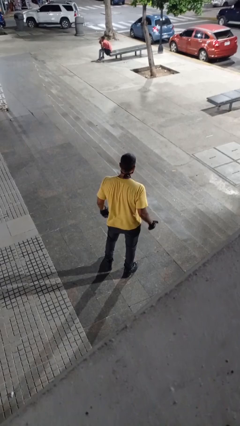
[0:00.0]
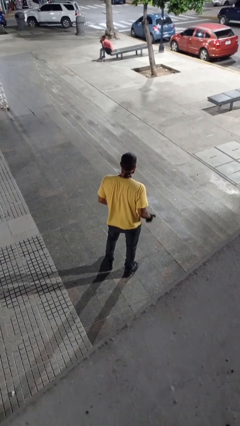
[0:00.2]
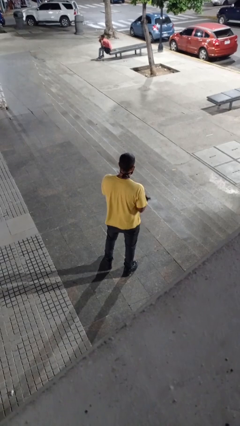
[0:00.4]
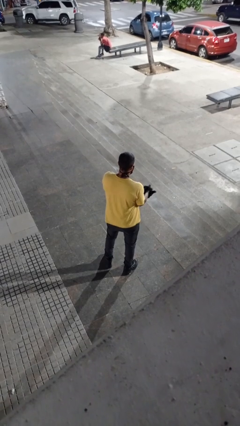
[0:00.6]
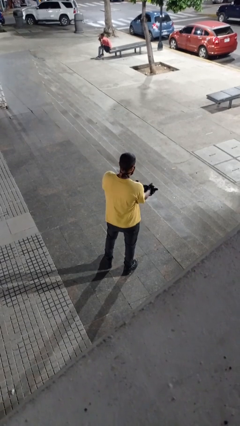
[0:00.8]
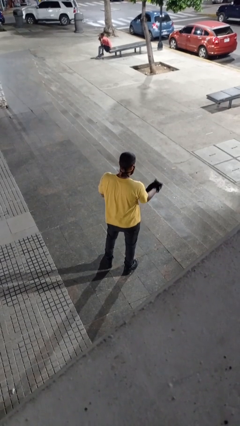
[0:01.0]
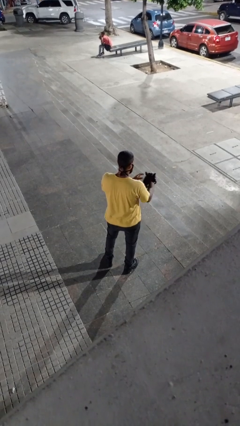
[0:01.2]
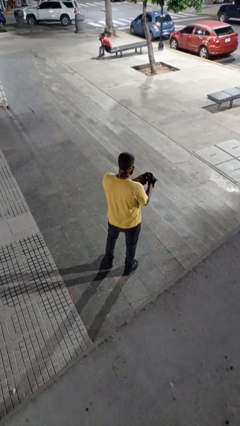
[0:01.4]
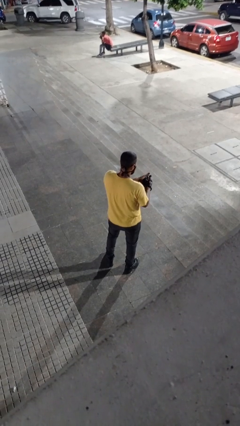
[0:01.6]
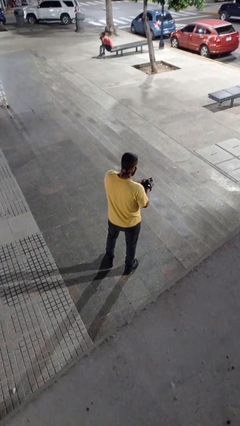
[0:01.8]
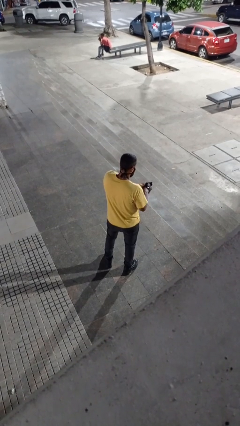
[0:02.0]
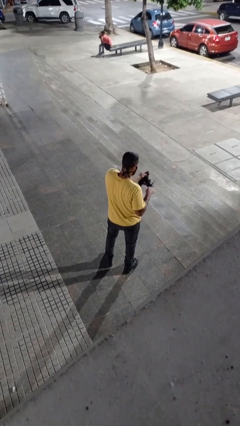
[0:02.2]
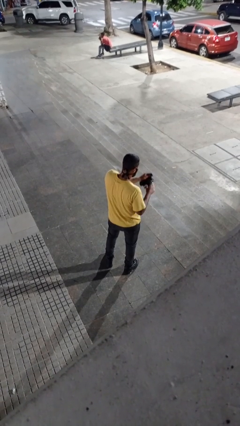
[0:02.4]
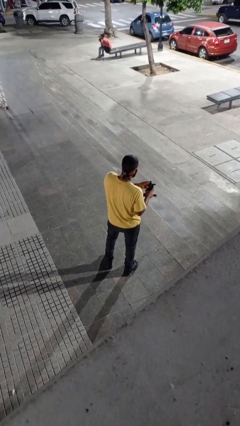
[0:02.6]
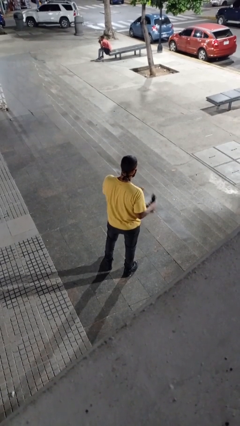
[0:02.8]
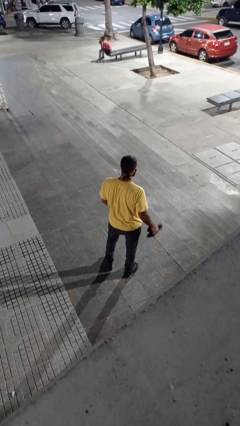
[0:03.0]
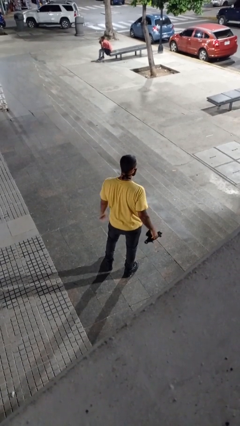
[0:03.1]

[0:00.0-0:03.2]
person takes off gloves

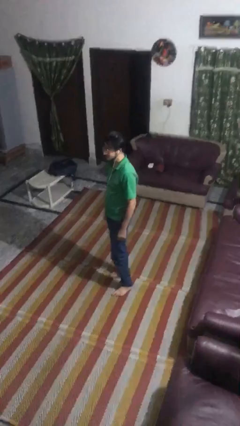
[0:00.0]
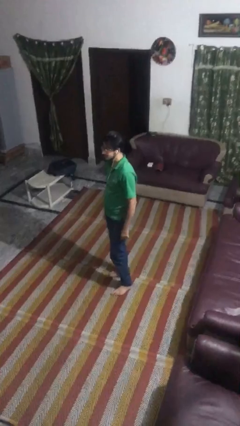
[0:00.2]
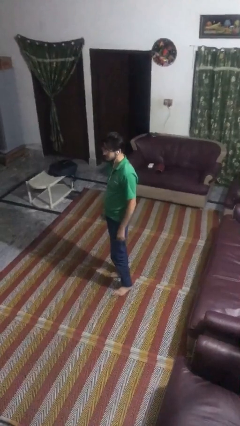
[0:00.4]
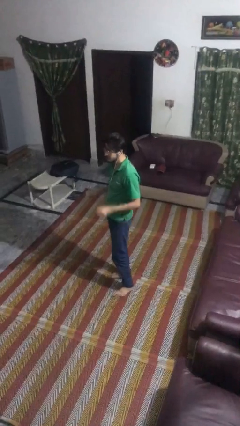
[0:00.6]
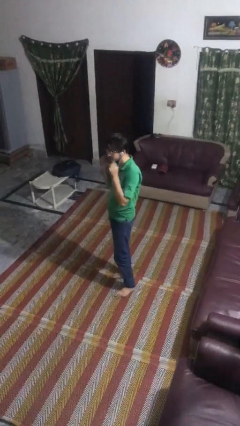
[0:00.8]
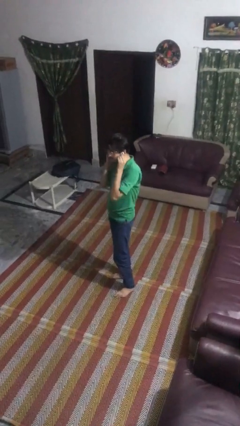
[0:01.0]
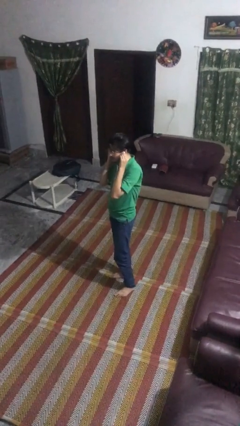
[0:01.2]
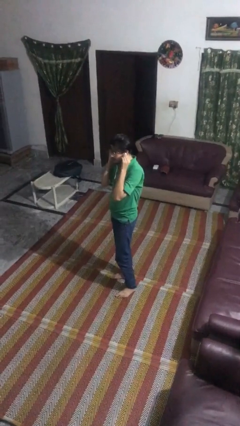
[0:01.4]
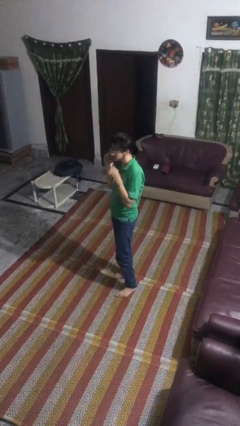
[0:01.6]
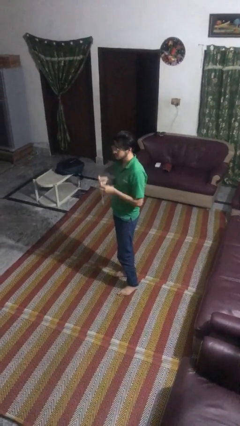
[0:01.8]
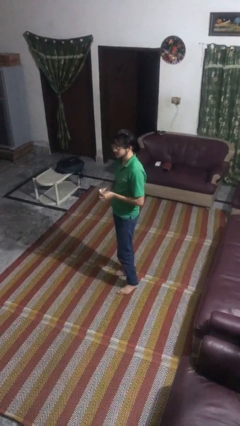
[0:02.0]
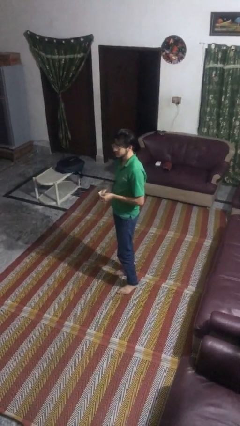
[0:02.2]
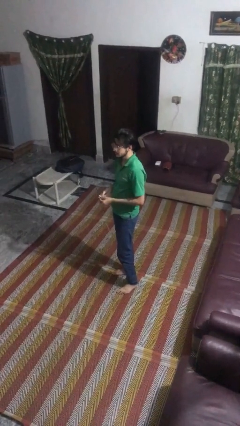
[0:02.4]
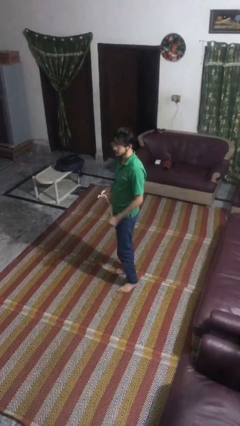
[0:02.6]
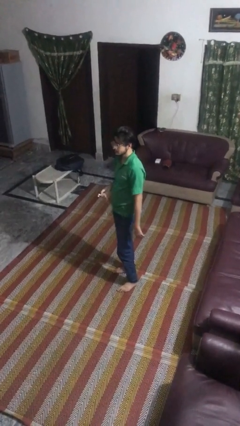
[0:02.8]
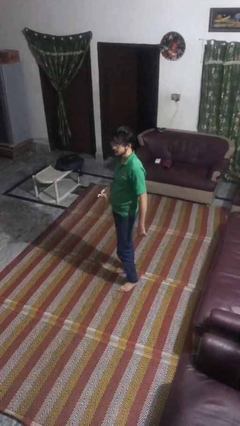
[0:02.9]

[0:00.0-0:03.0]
person takes off headphones

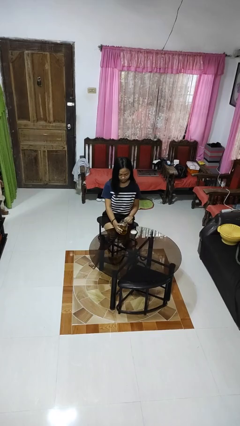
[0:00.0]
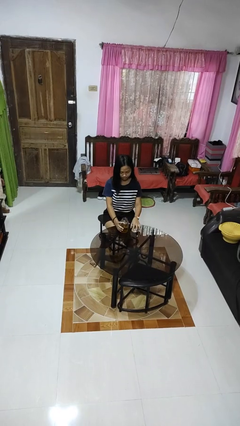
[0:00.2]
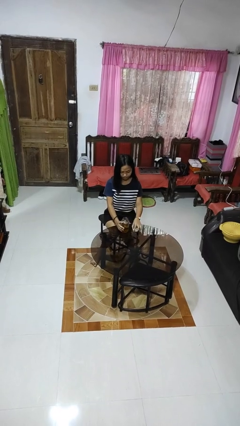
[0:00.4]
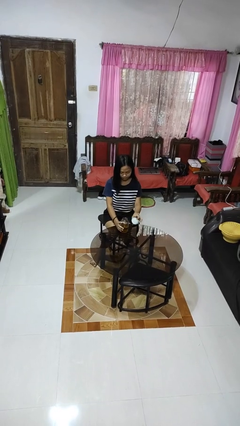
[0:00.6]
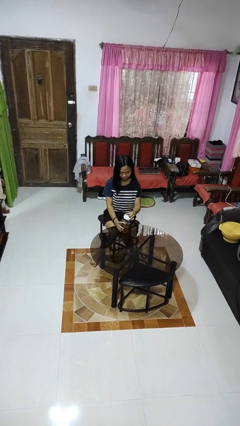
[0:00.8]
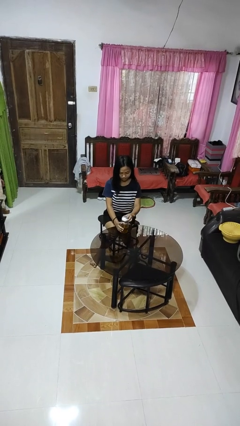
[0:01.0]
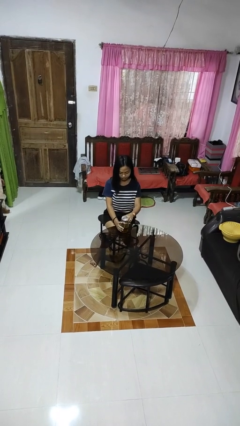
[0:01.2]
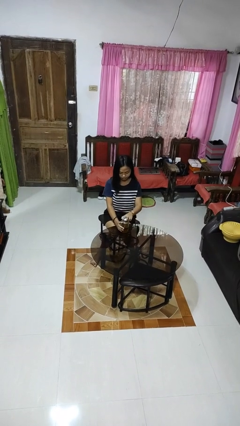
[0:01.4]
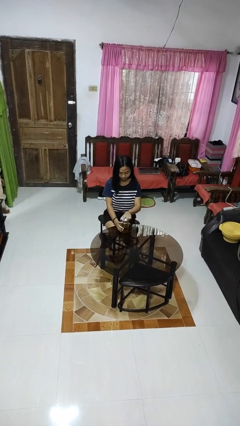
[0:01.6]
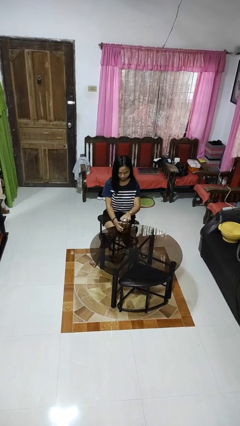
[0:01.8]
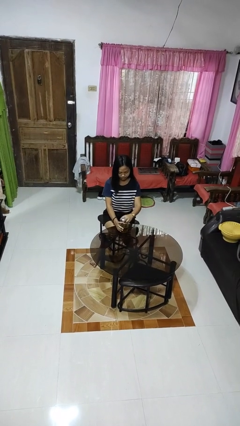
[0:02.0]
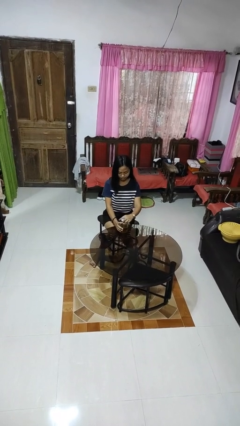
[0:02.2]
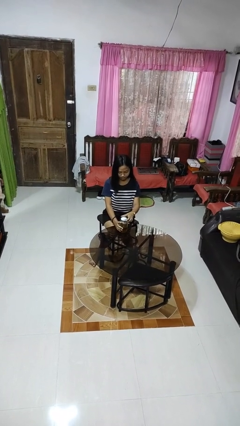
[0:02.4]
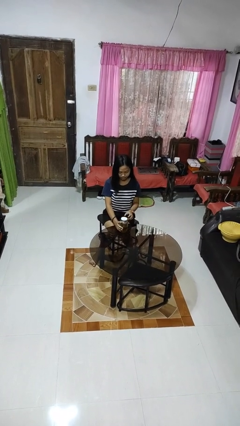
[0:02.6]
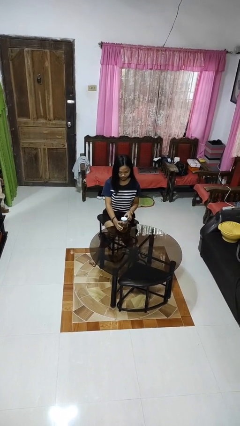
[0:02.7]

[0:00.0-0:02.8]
person closes jar

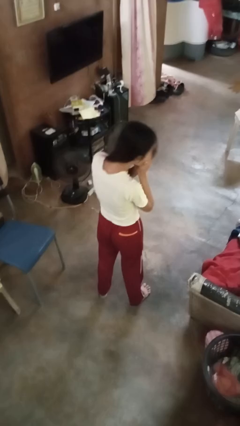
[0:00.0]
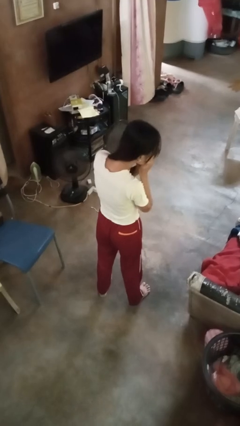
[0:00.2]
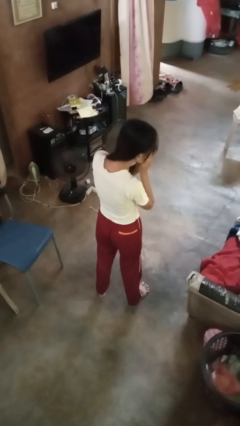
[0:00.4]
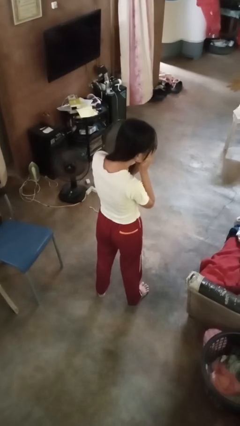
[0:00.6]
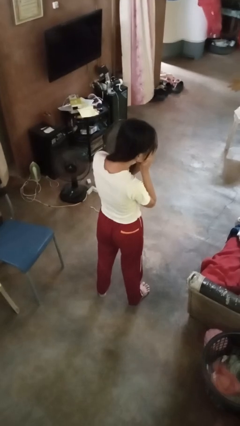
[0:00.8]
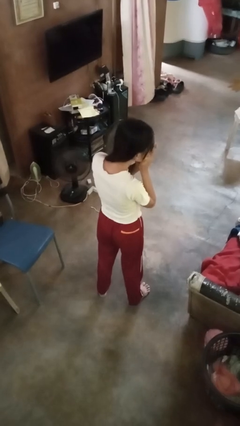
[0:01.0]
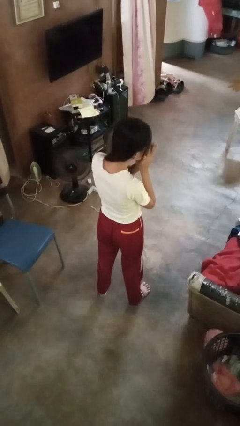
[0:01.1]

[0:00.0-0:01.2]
person sneezes into hand

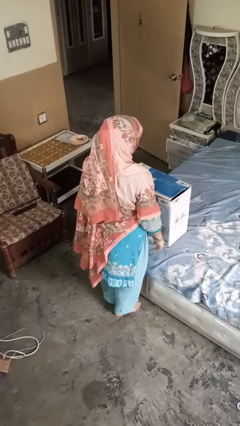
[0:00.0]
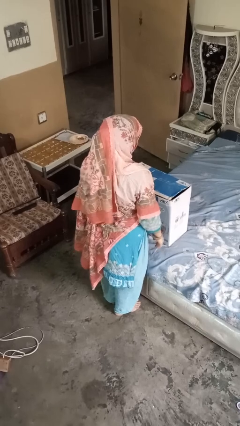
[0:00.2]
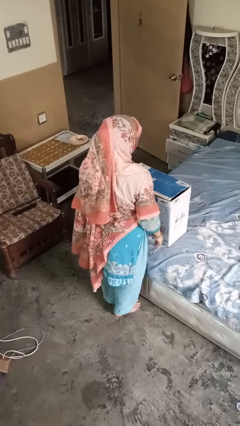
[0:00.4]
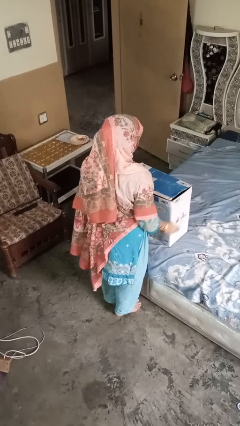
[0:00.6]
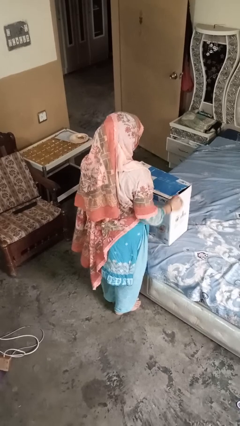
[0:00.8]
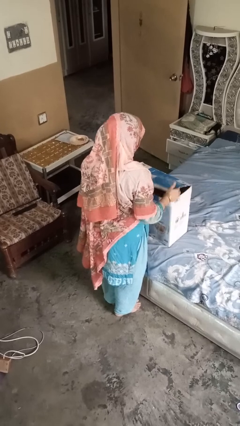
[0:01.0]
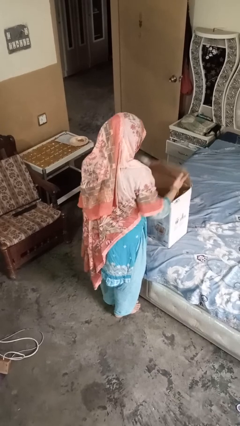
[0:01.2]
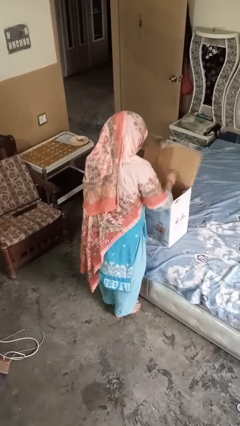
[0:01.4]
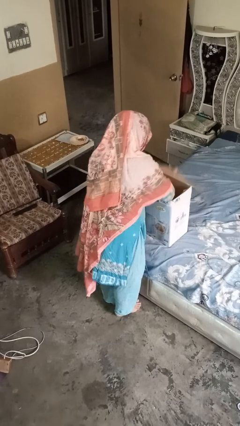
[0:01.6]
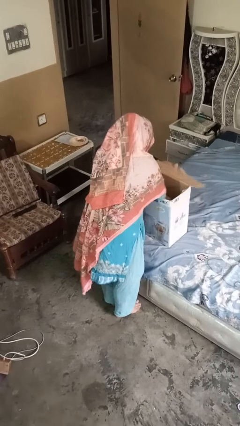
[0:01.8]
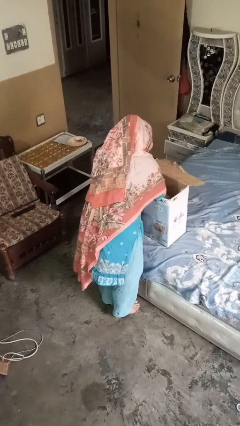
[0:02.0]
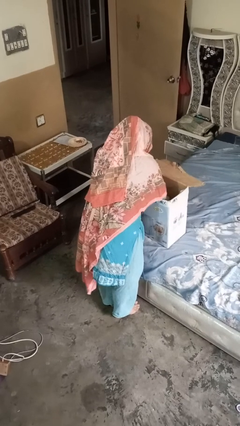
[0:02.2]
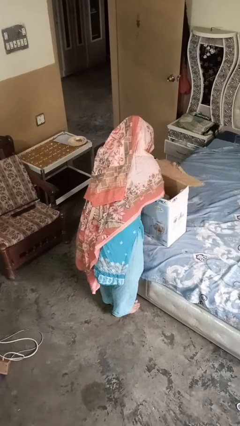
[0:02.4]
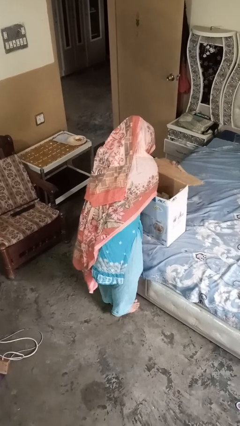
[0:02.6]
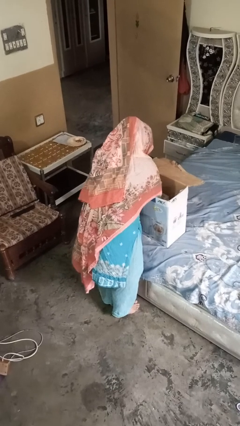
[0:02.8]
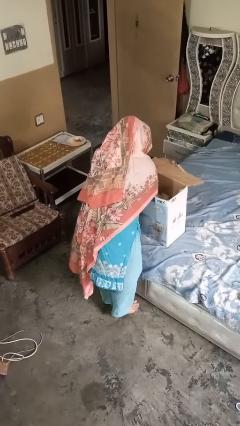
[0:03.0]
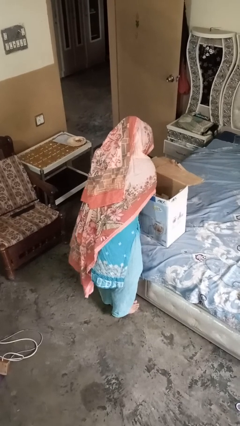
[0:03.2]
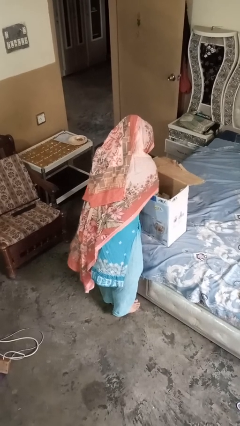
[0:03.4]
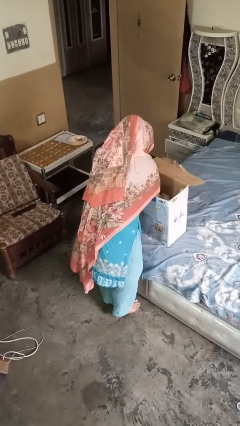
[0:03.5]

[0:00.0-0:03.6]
person searches in box

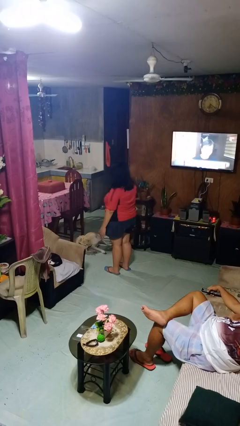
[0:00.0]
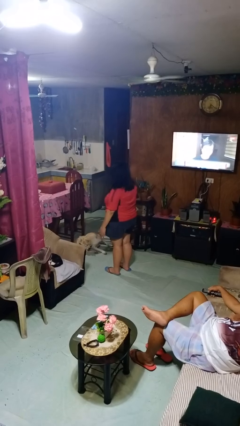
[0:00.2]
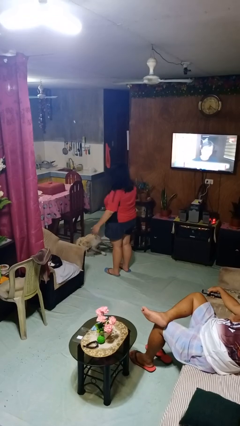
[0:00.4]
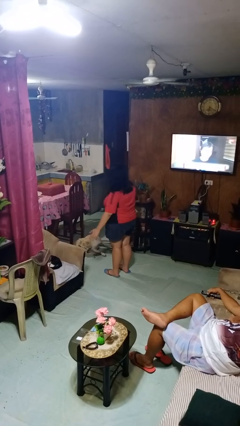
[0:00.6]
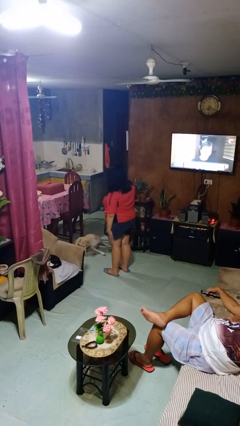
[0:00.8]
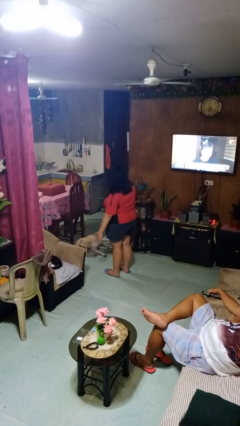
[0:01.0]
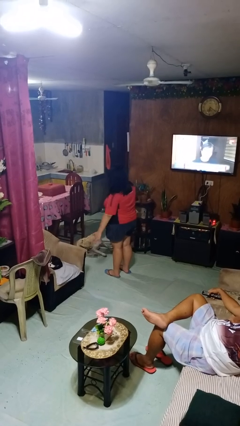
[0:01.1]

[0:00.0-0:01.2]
person slaps hands on thighs

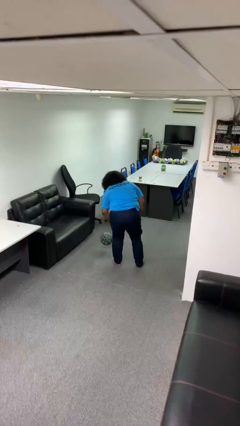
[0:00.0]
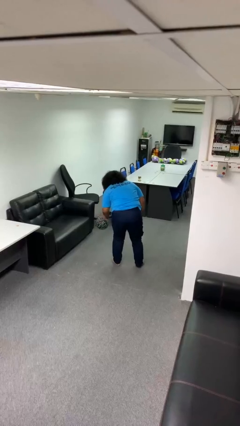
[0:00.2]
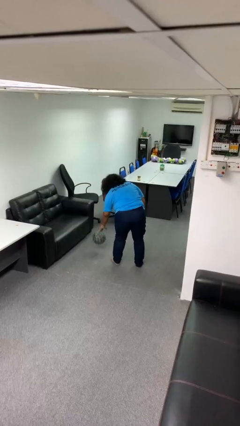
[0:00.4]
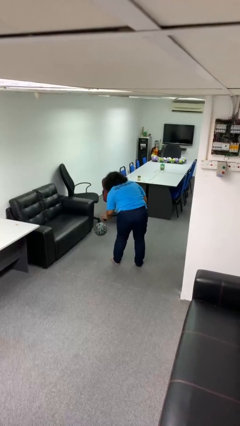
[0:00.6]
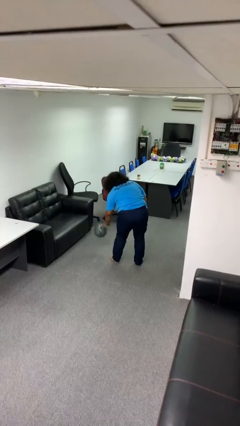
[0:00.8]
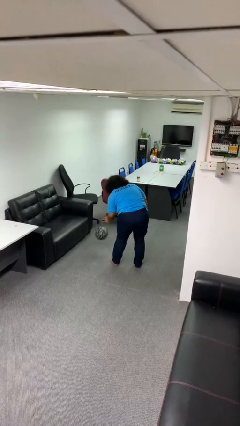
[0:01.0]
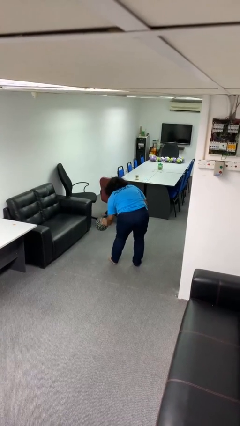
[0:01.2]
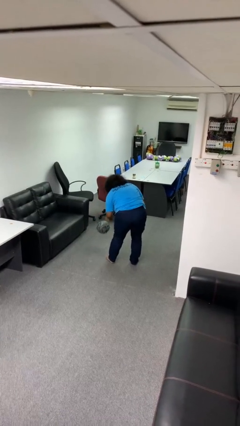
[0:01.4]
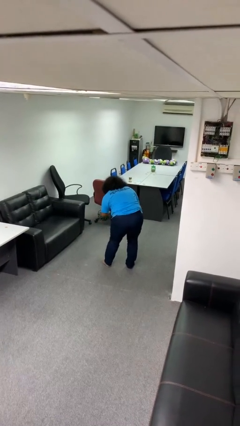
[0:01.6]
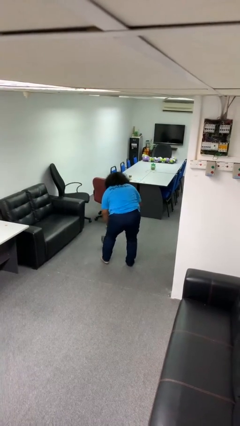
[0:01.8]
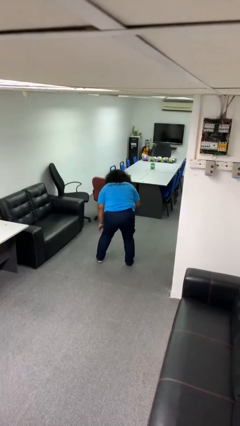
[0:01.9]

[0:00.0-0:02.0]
person bounces ball on floor
